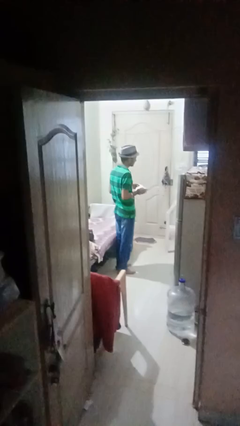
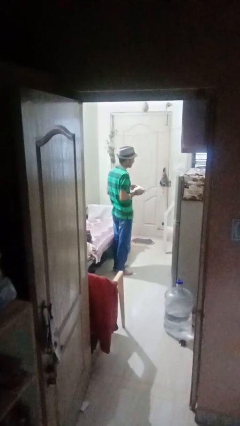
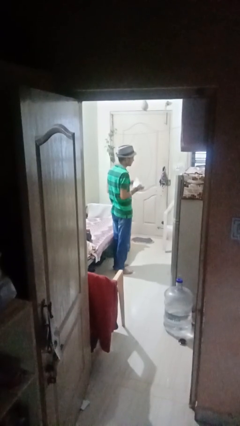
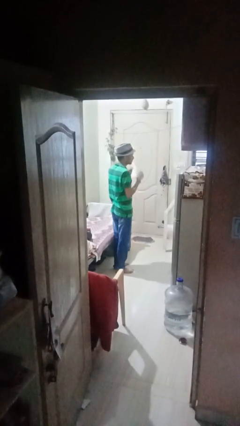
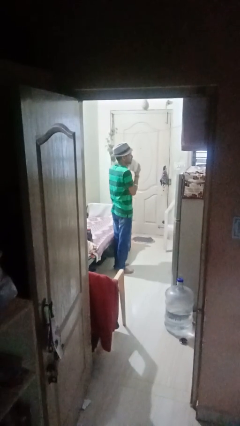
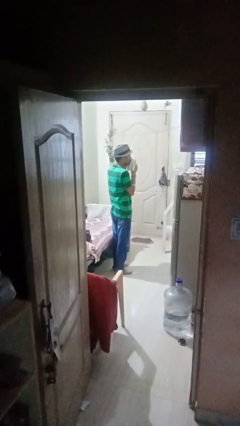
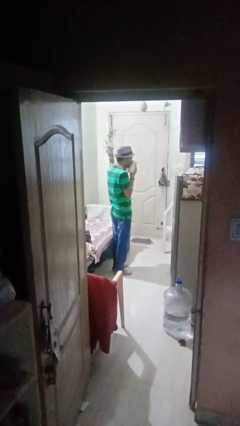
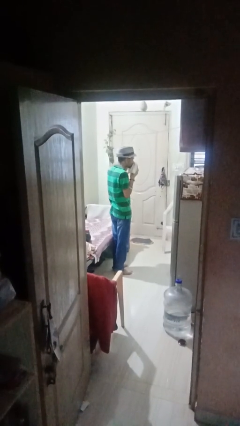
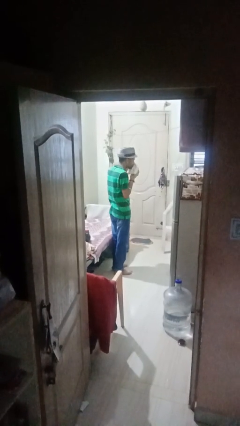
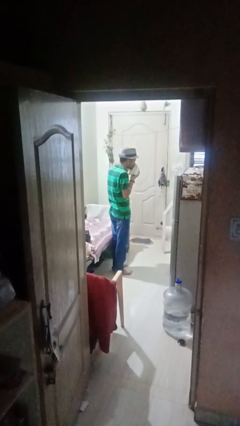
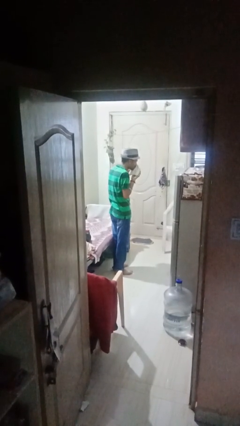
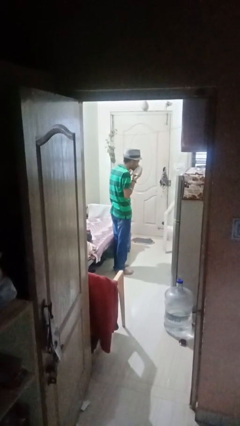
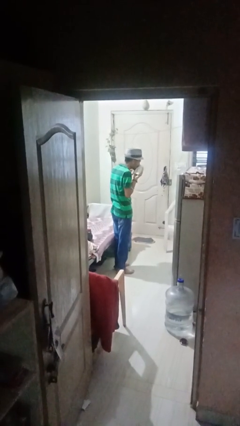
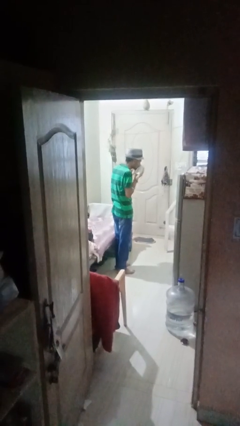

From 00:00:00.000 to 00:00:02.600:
person blows nose

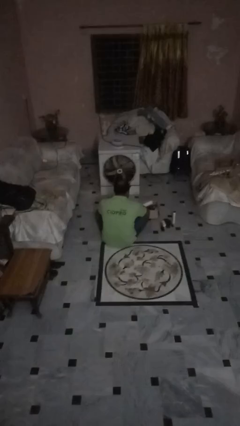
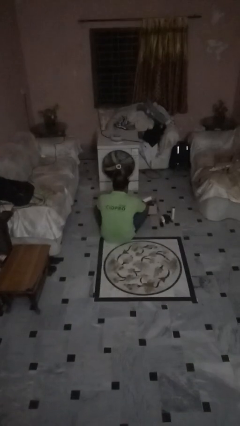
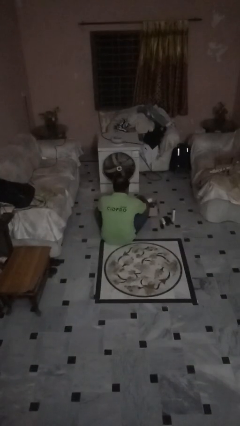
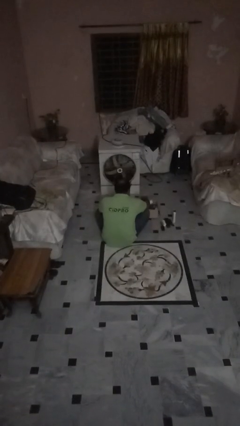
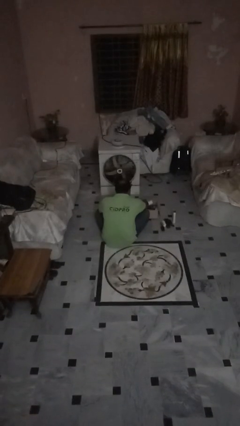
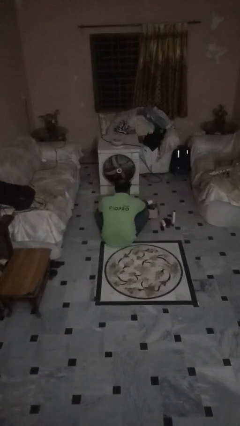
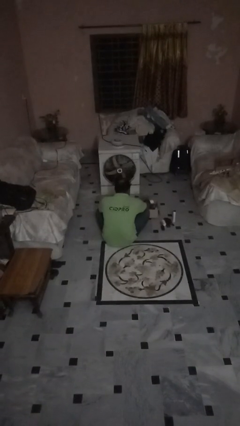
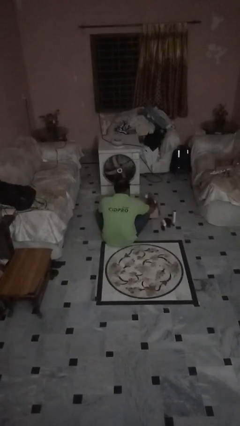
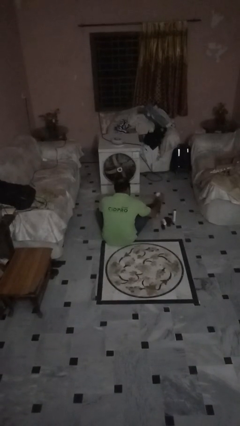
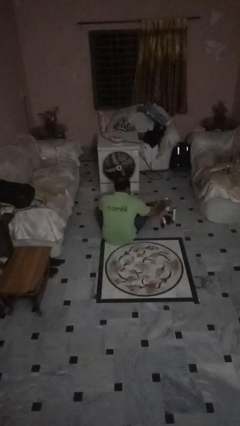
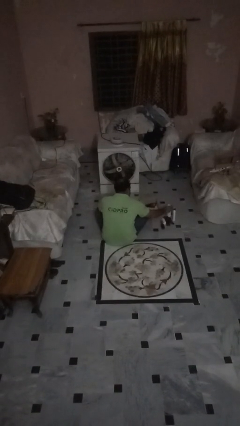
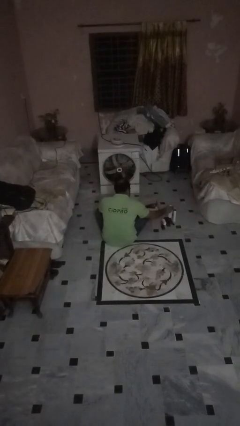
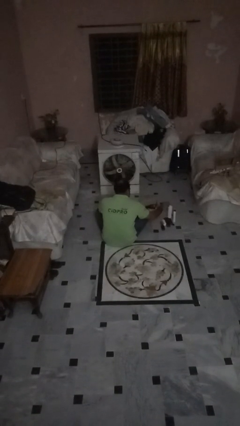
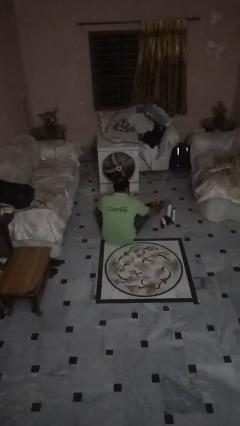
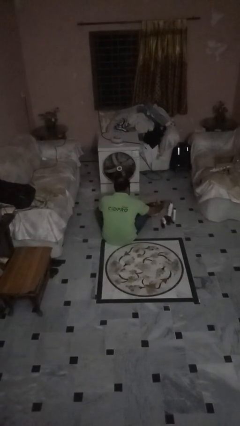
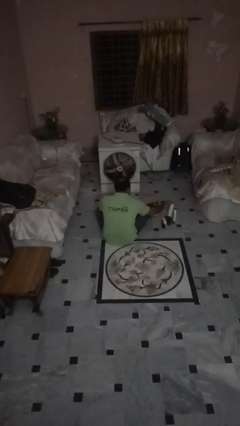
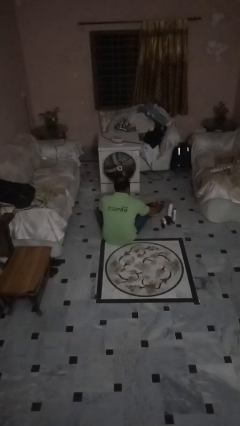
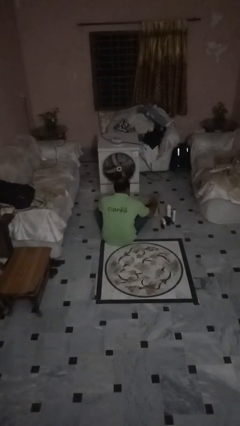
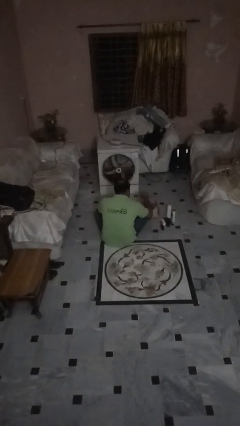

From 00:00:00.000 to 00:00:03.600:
person unloads box onto floor

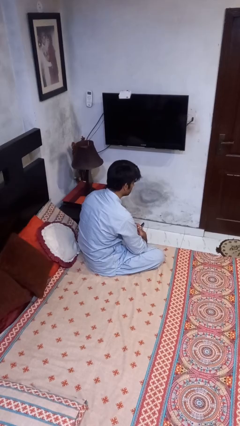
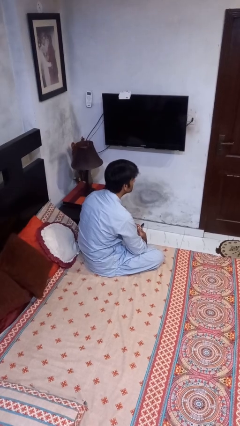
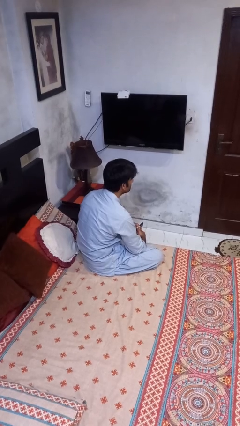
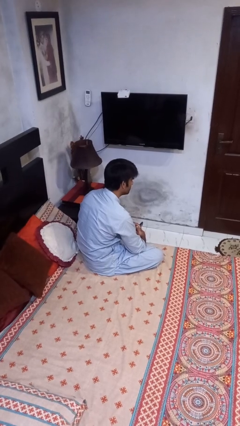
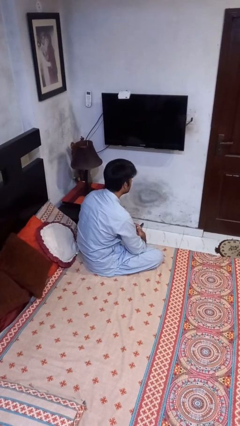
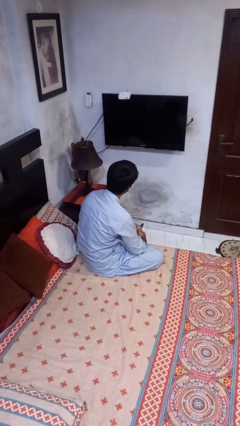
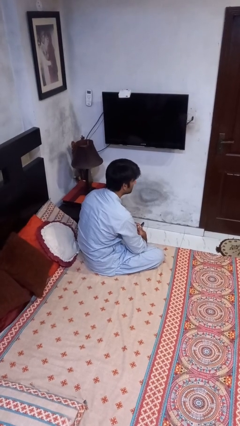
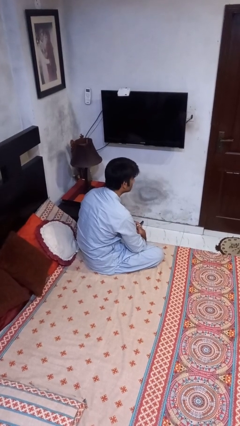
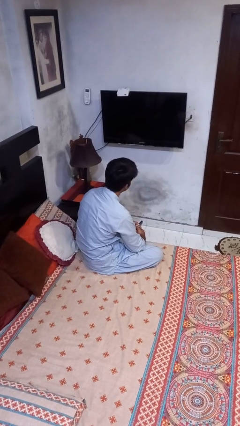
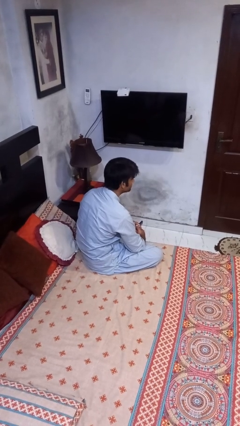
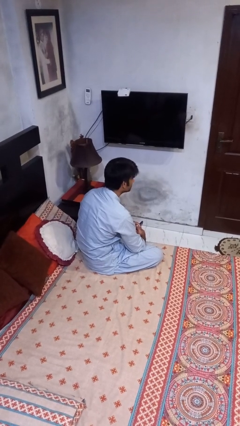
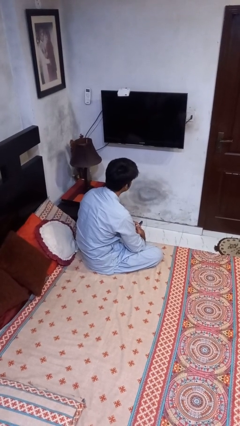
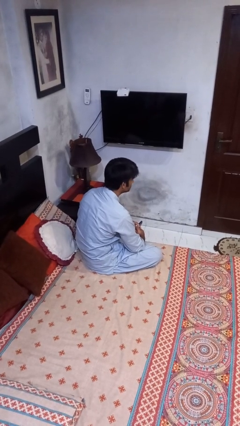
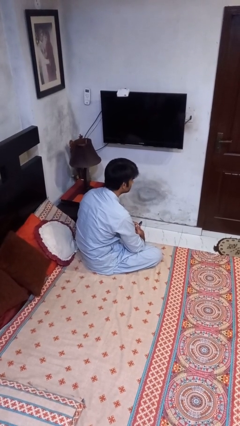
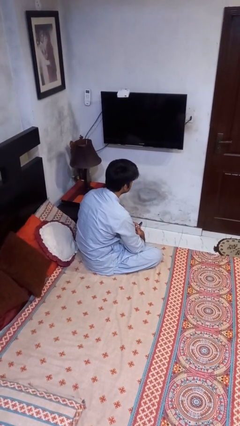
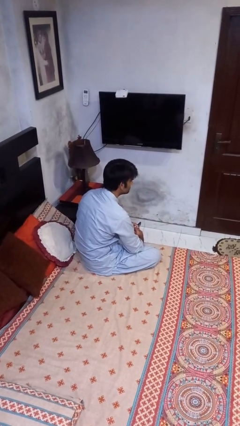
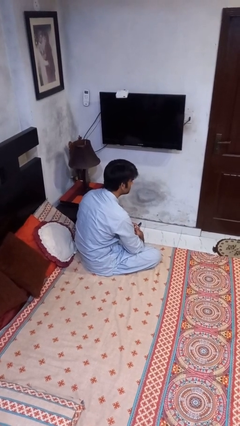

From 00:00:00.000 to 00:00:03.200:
person shakes head

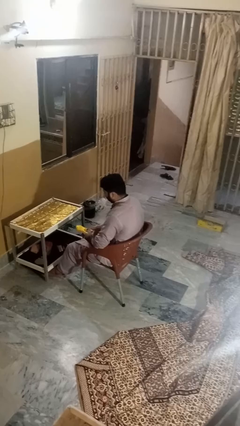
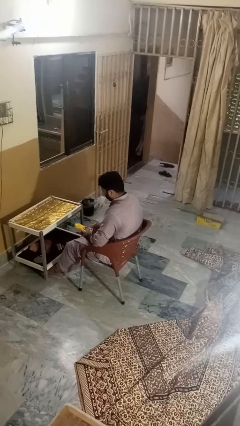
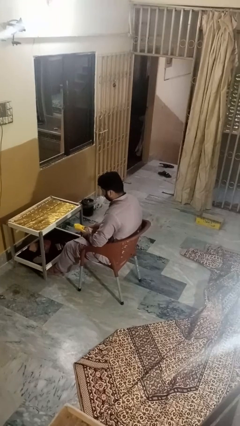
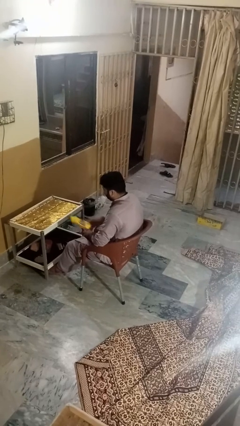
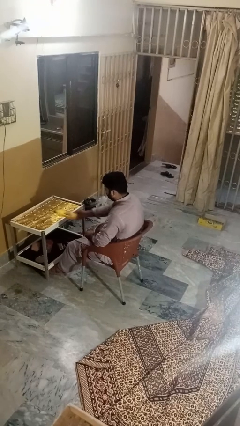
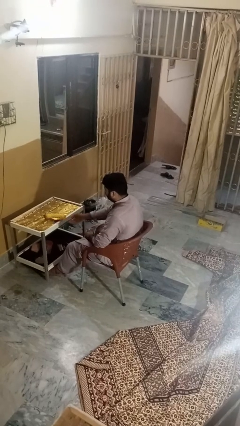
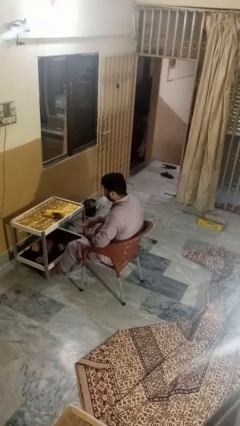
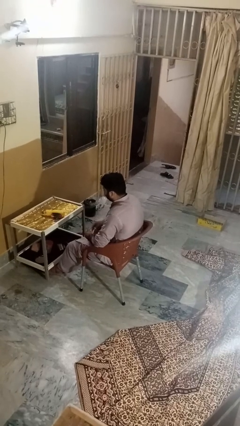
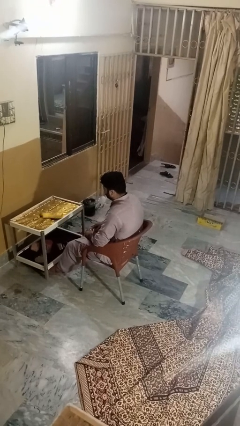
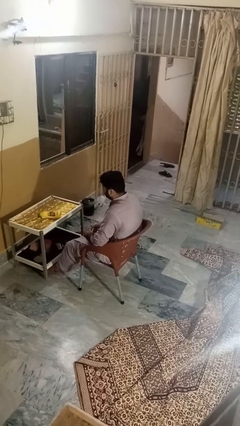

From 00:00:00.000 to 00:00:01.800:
person throws object on table

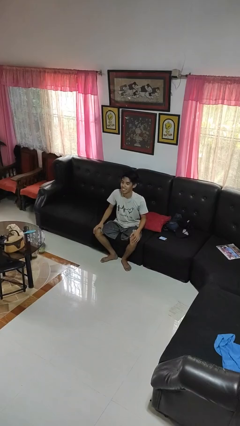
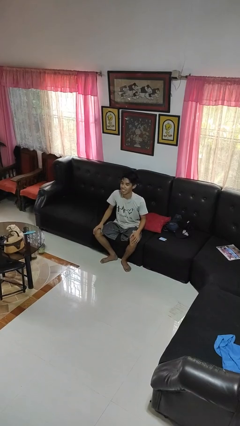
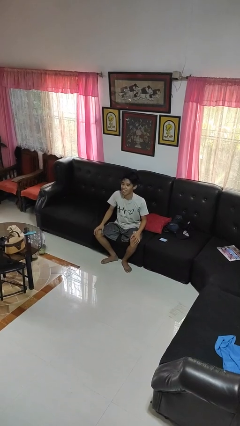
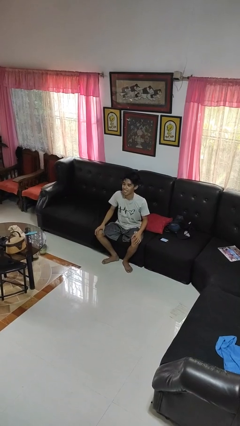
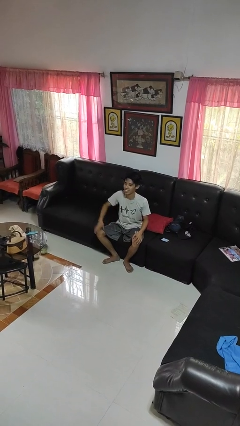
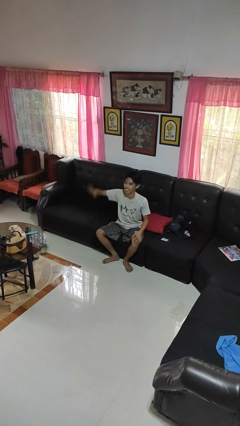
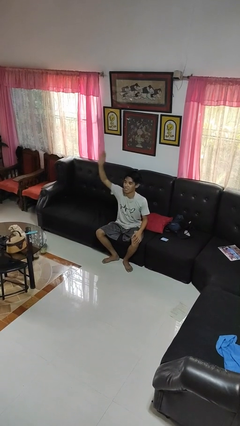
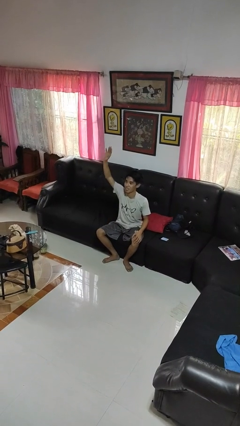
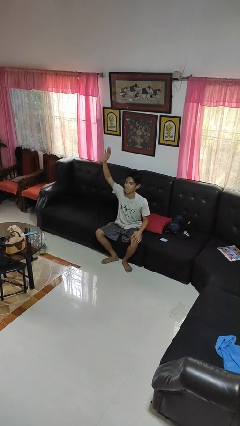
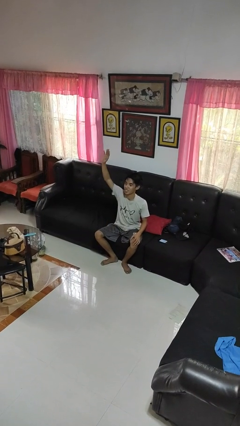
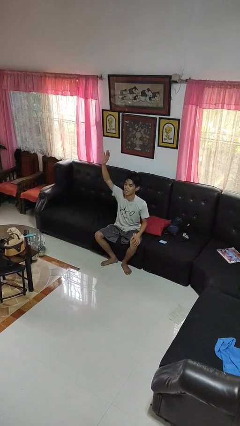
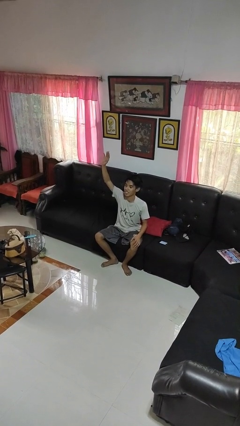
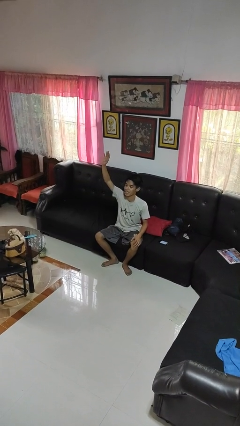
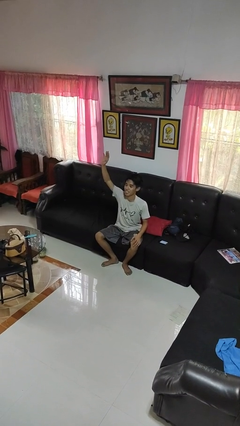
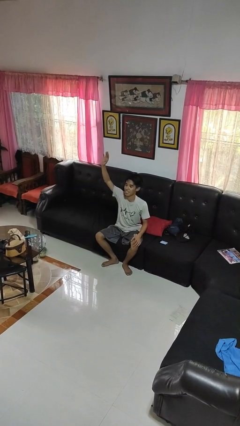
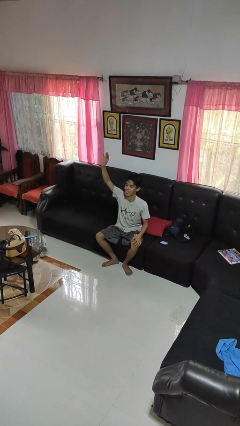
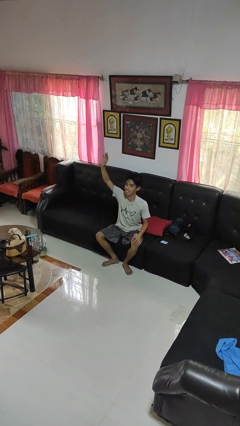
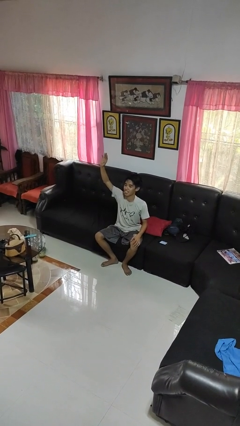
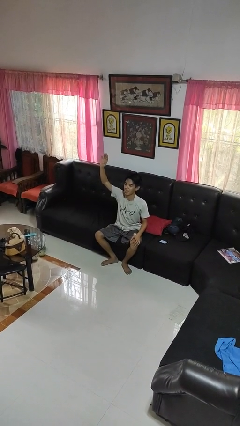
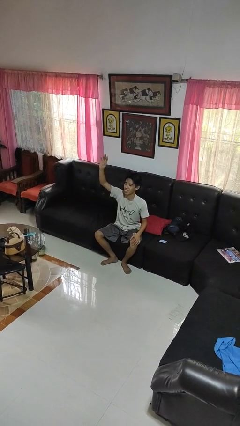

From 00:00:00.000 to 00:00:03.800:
person gestures raise hand

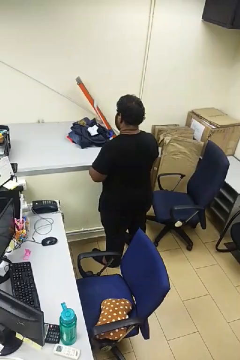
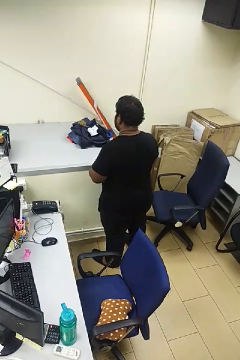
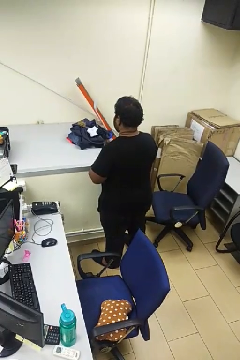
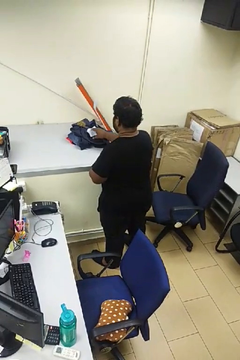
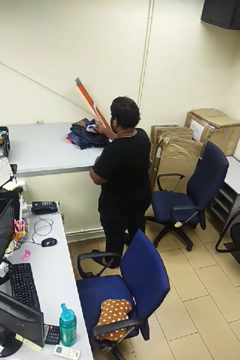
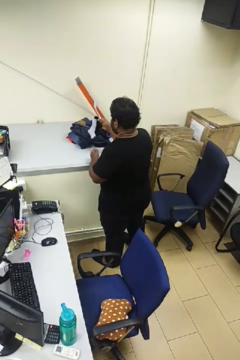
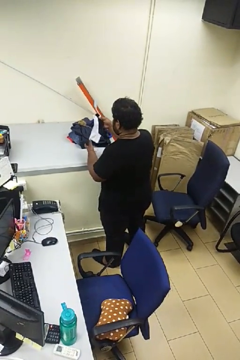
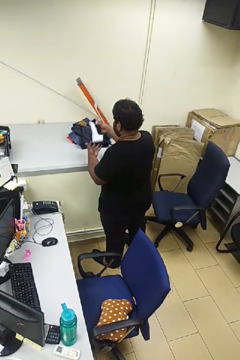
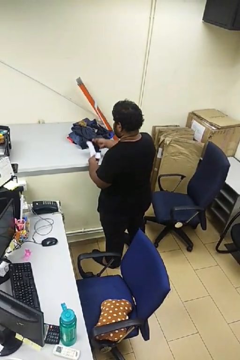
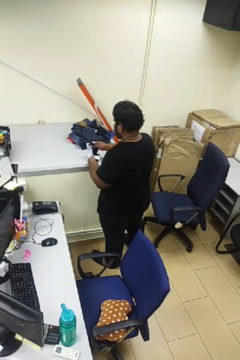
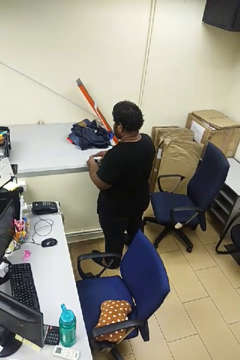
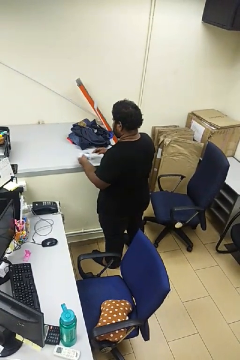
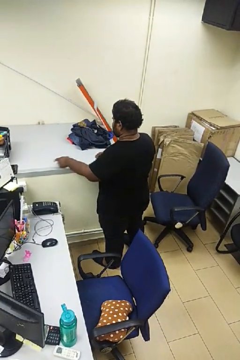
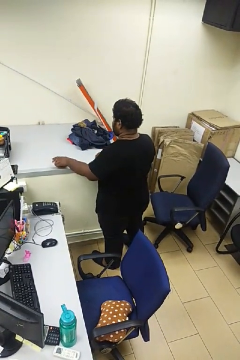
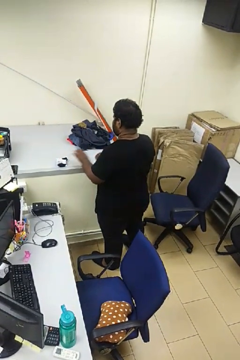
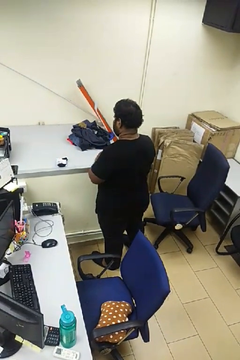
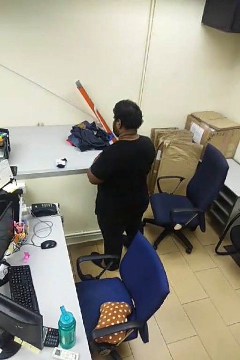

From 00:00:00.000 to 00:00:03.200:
person folds socks
